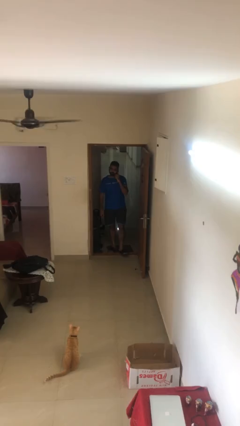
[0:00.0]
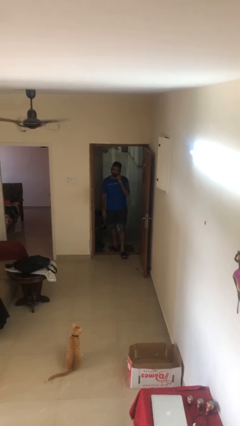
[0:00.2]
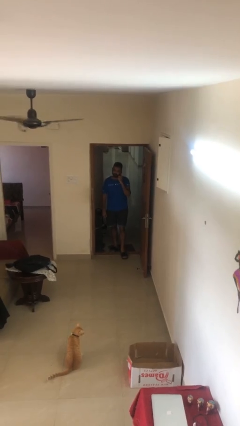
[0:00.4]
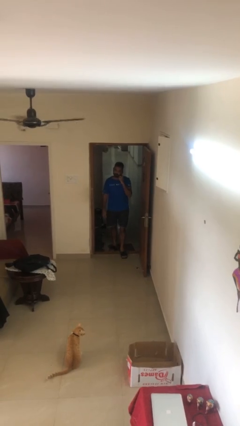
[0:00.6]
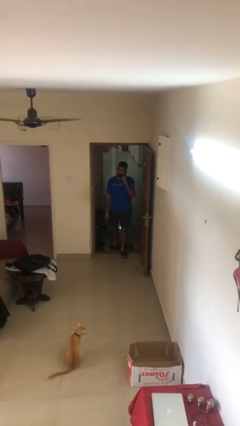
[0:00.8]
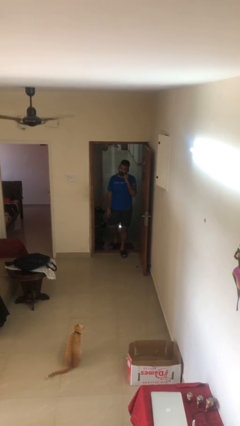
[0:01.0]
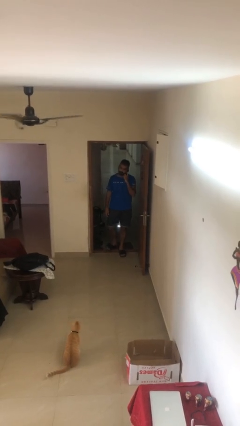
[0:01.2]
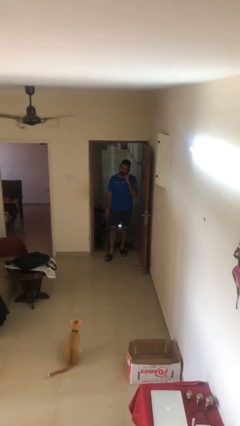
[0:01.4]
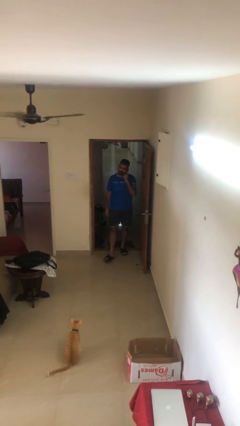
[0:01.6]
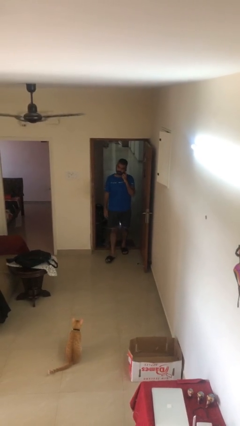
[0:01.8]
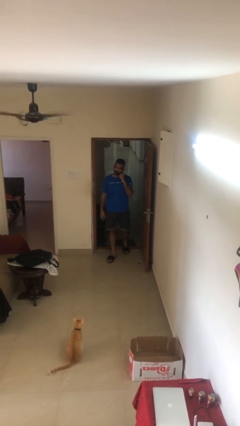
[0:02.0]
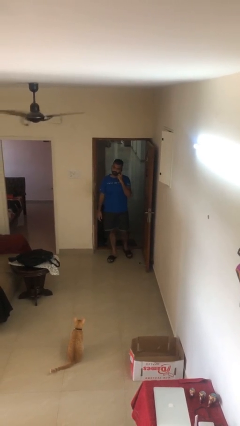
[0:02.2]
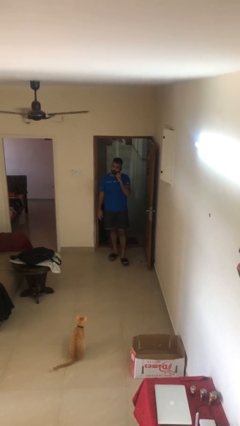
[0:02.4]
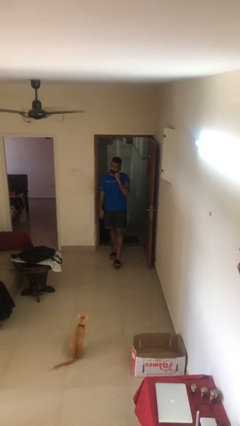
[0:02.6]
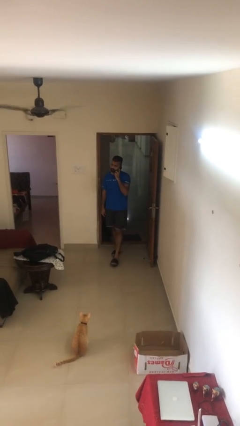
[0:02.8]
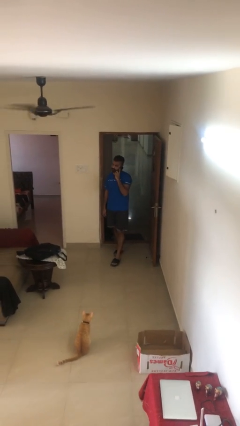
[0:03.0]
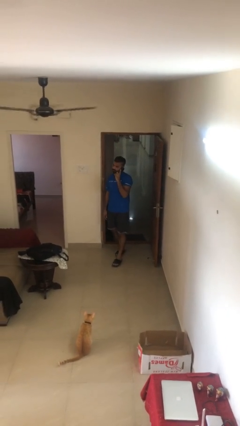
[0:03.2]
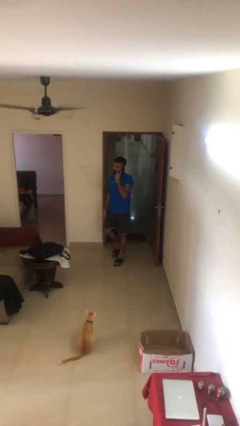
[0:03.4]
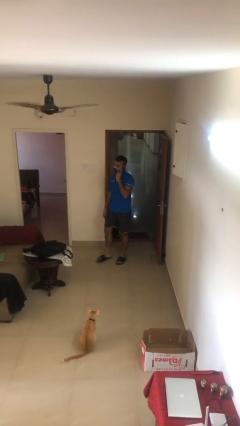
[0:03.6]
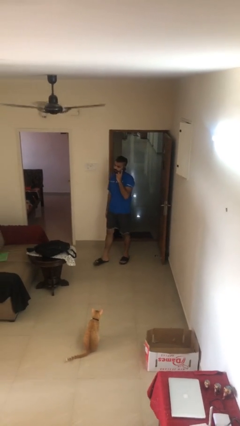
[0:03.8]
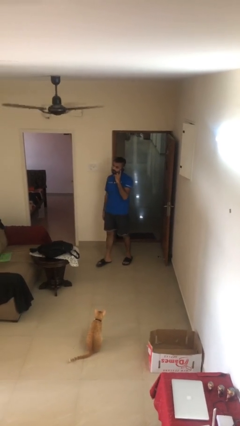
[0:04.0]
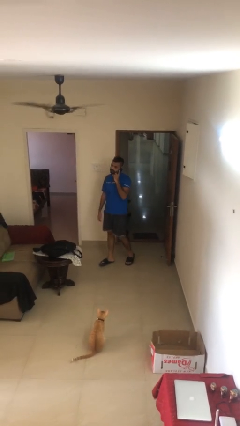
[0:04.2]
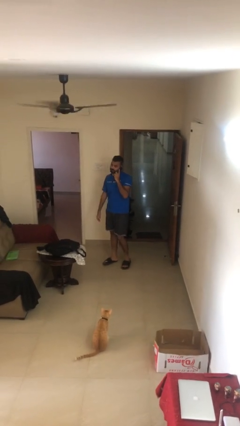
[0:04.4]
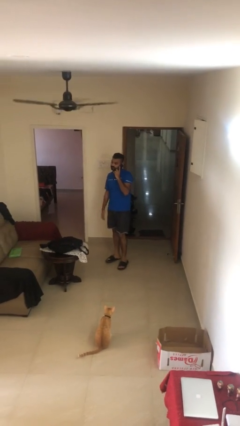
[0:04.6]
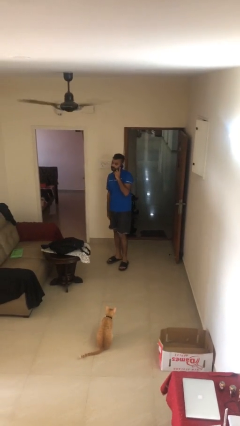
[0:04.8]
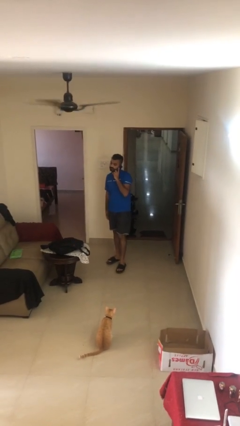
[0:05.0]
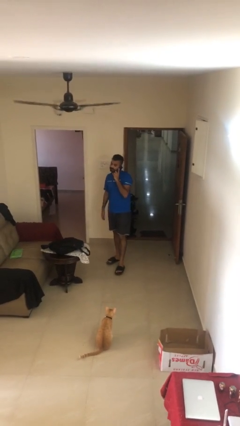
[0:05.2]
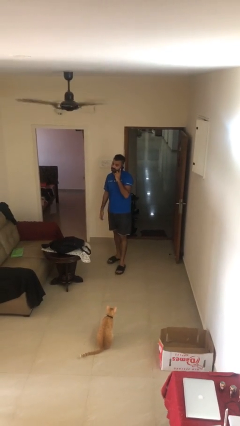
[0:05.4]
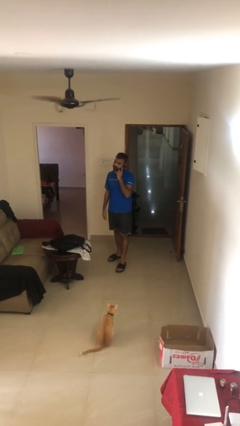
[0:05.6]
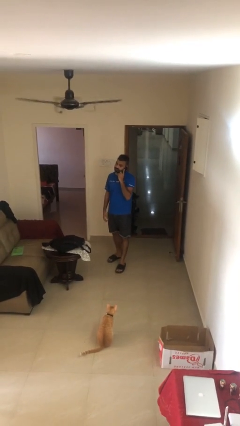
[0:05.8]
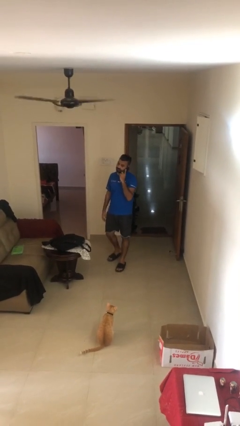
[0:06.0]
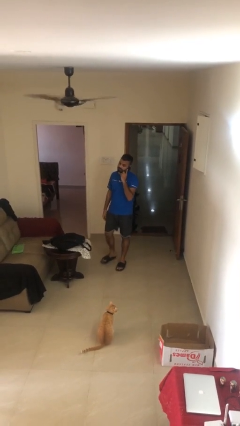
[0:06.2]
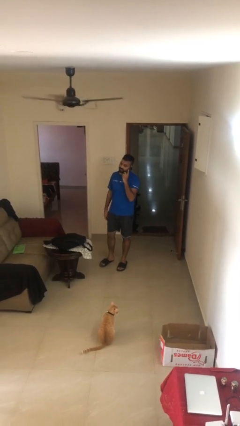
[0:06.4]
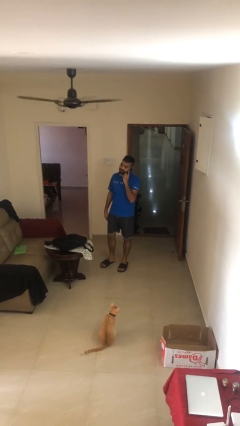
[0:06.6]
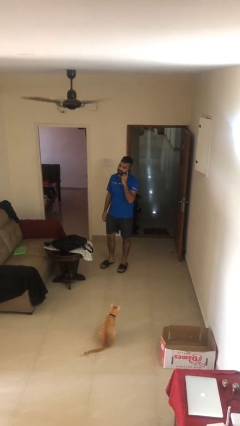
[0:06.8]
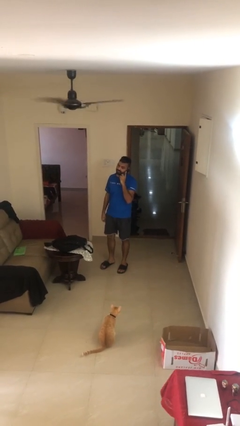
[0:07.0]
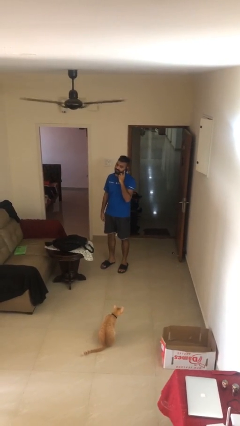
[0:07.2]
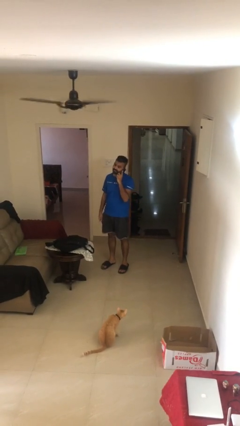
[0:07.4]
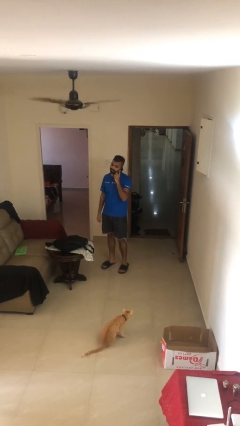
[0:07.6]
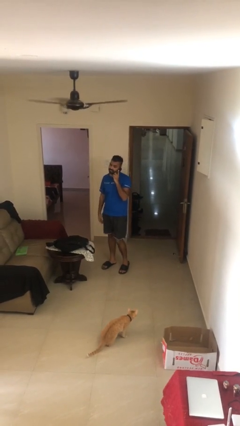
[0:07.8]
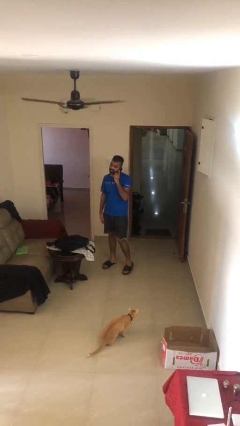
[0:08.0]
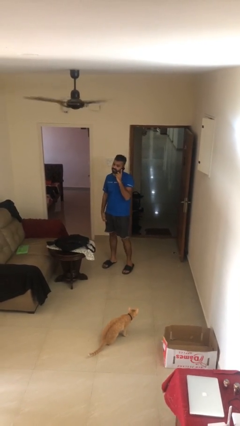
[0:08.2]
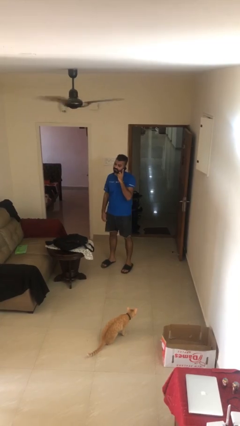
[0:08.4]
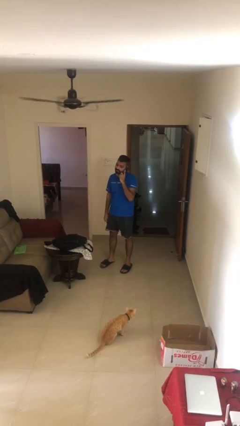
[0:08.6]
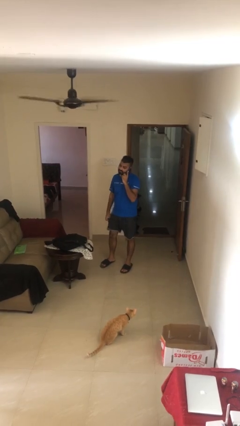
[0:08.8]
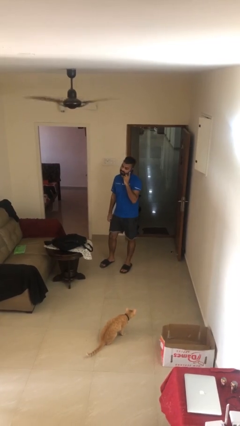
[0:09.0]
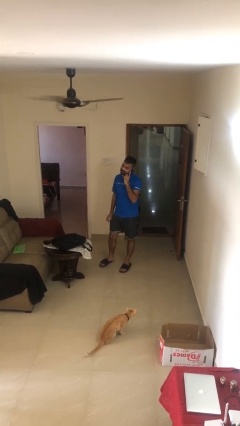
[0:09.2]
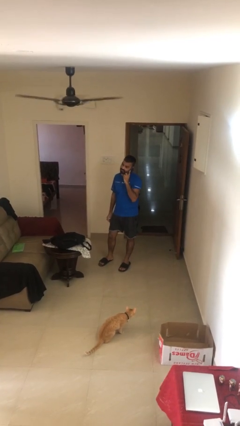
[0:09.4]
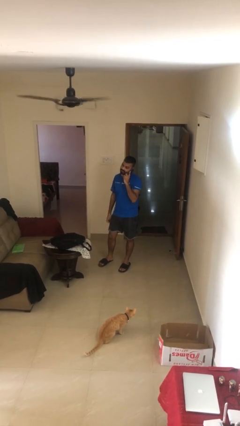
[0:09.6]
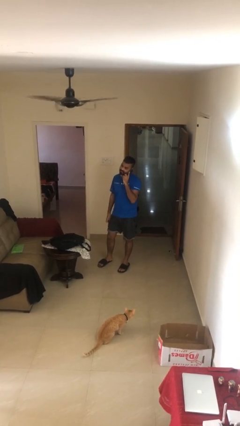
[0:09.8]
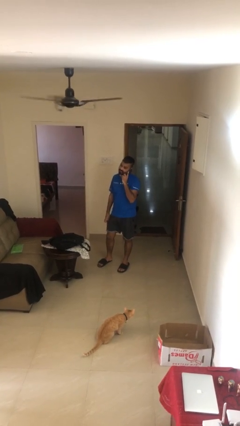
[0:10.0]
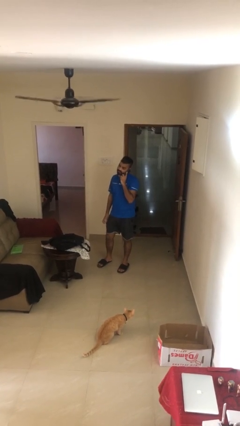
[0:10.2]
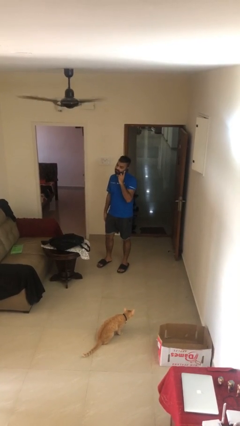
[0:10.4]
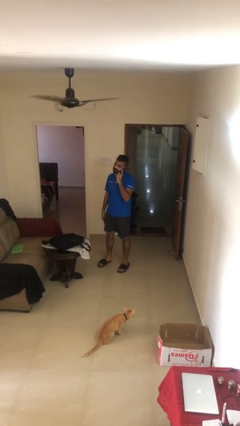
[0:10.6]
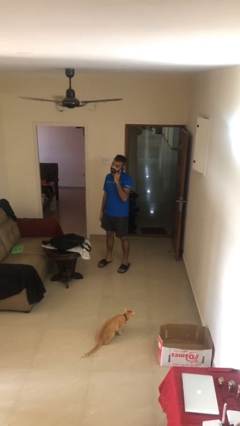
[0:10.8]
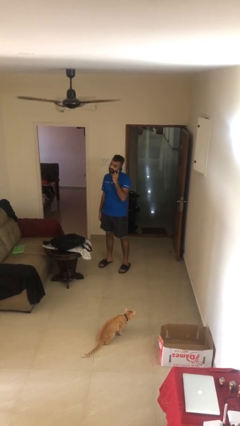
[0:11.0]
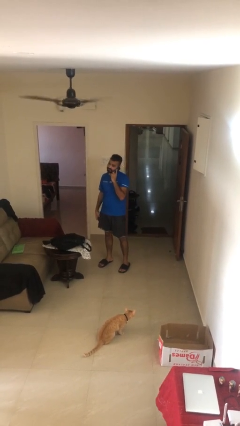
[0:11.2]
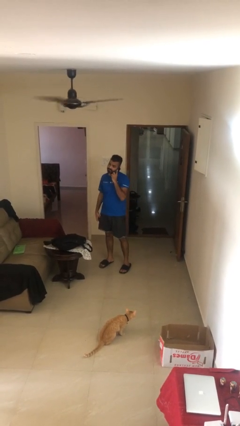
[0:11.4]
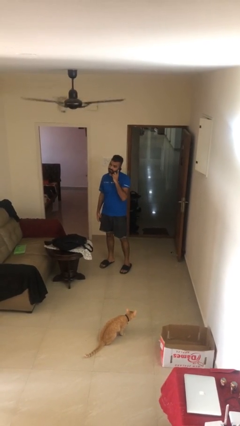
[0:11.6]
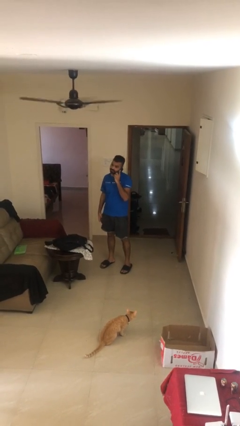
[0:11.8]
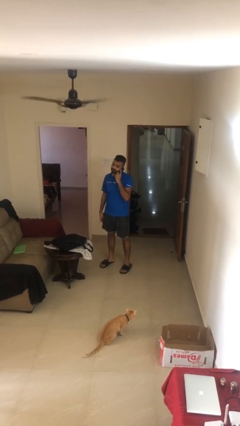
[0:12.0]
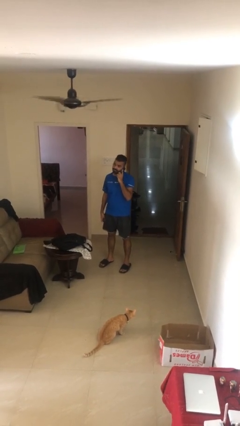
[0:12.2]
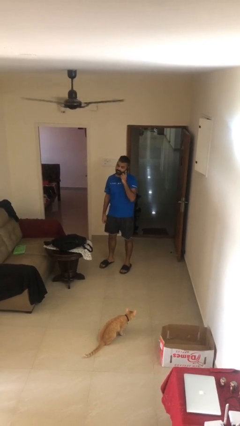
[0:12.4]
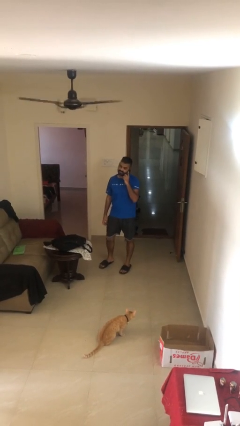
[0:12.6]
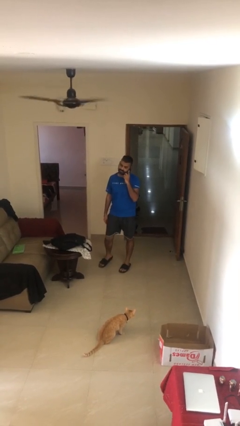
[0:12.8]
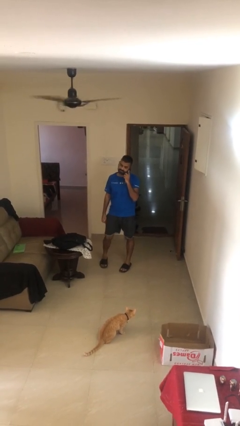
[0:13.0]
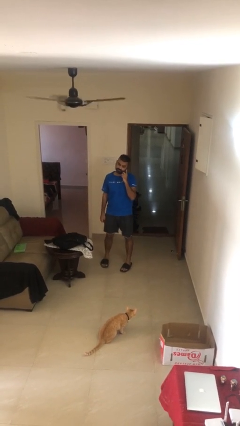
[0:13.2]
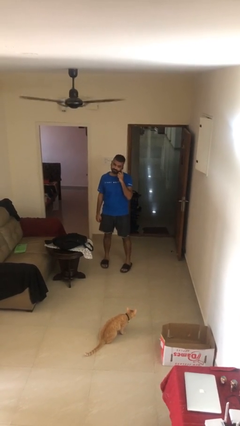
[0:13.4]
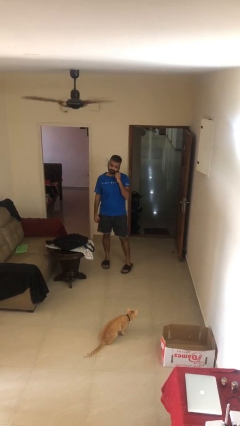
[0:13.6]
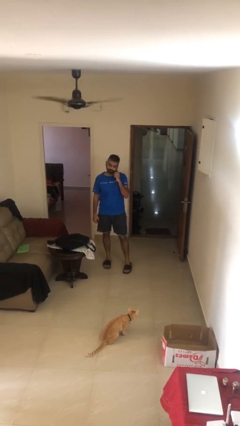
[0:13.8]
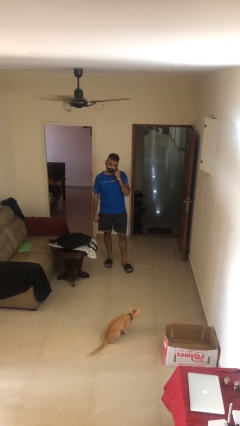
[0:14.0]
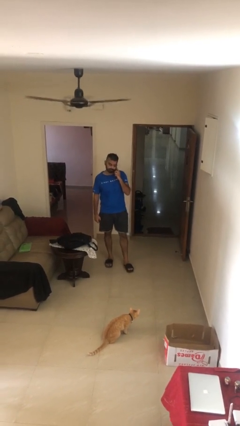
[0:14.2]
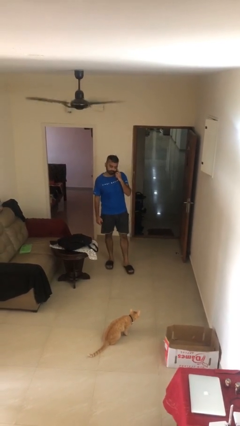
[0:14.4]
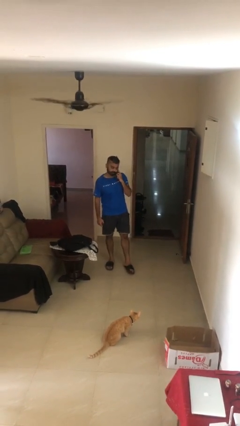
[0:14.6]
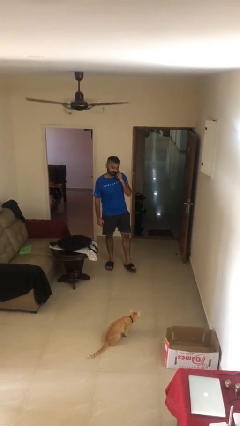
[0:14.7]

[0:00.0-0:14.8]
person enters scene through structure

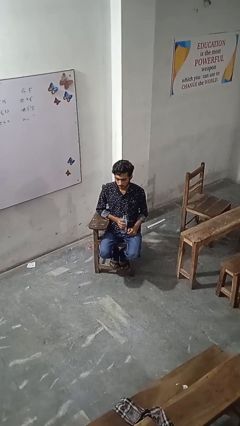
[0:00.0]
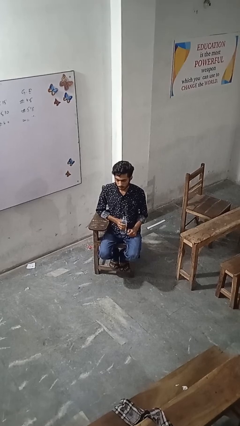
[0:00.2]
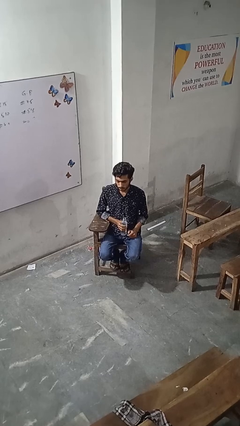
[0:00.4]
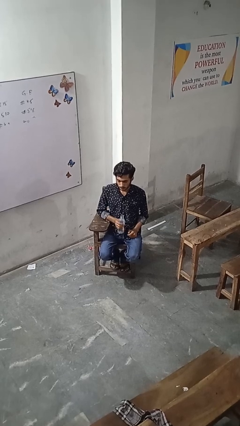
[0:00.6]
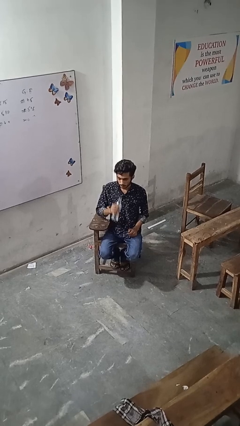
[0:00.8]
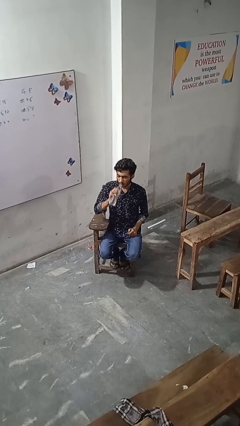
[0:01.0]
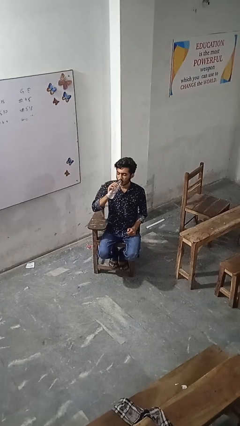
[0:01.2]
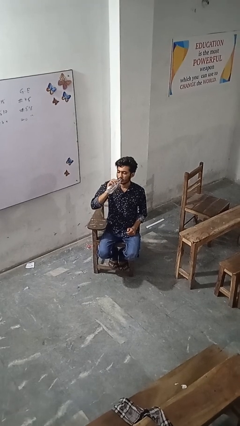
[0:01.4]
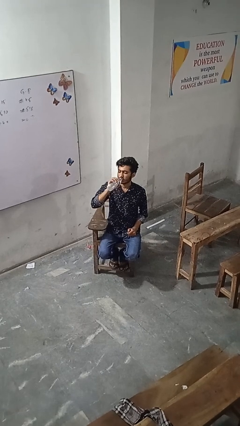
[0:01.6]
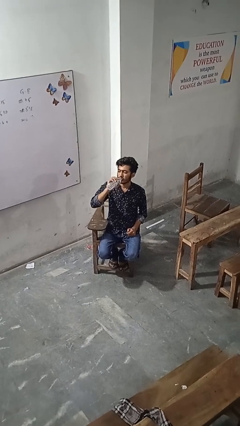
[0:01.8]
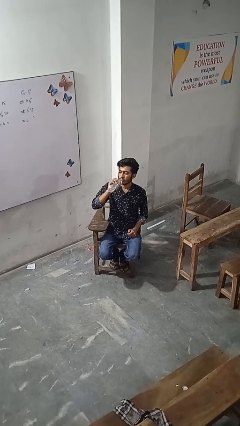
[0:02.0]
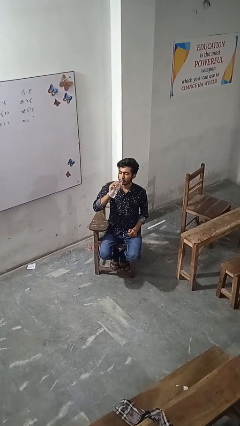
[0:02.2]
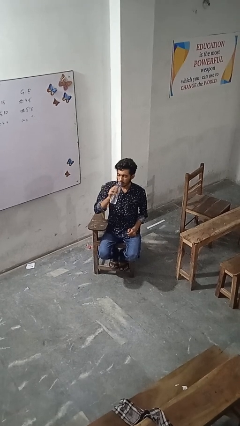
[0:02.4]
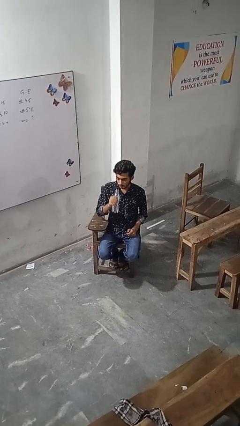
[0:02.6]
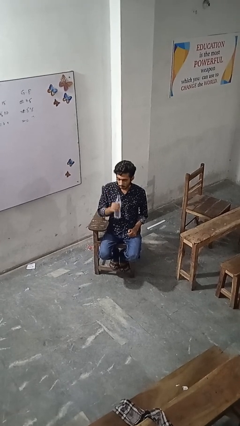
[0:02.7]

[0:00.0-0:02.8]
person drinks from bottle

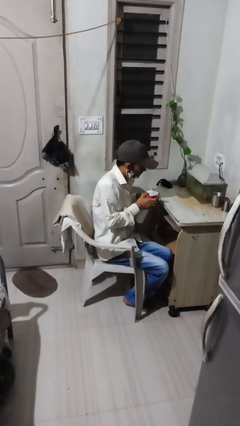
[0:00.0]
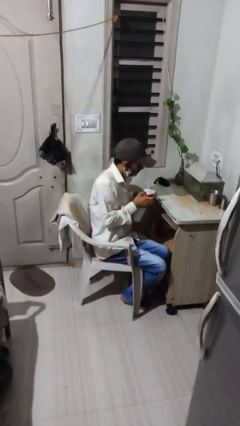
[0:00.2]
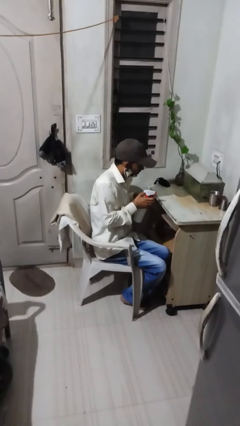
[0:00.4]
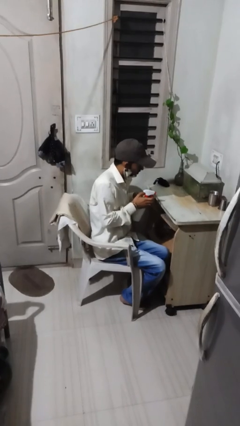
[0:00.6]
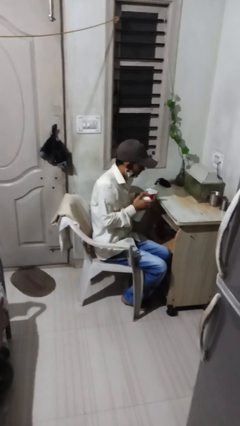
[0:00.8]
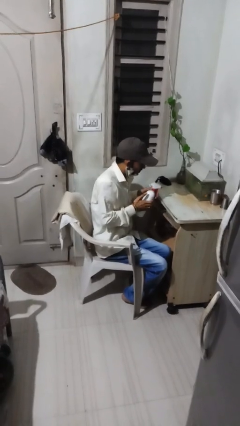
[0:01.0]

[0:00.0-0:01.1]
person sprays from bottle
